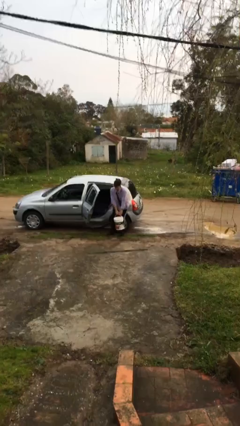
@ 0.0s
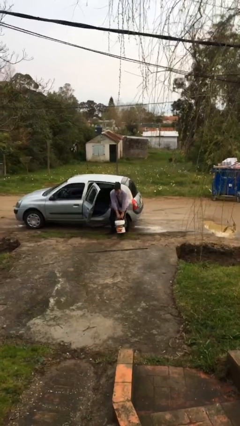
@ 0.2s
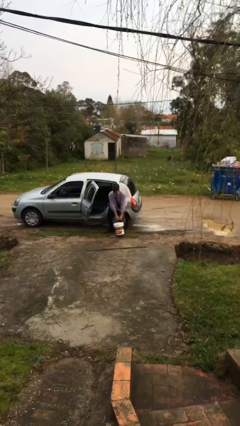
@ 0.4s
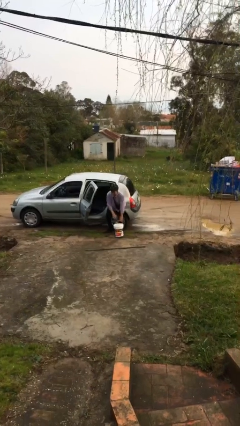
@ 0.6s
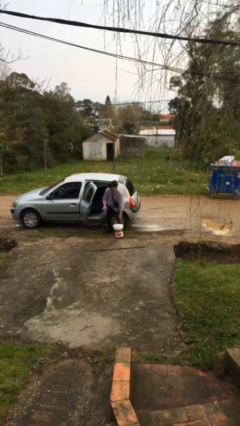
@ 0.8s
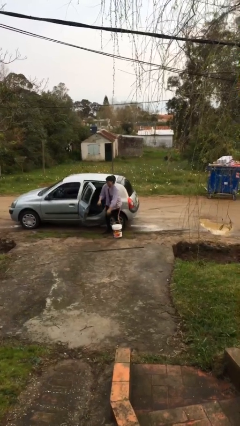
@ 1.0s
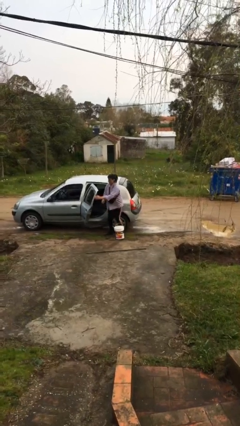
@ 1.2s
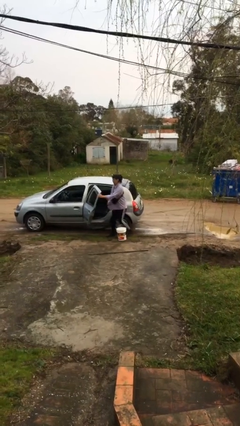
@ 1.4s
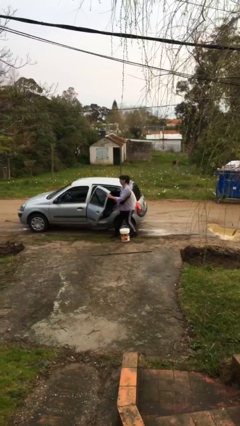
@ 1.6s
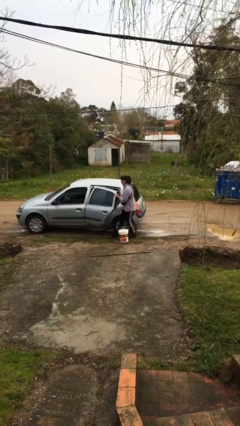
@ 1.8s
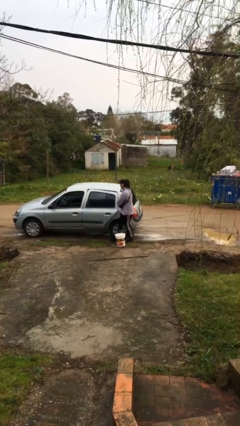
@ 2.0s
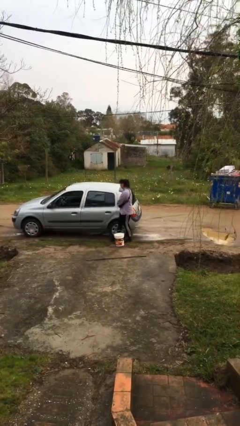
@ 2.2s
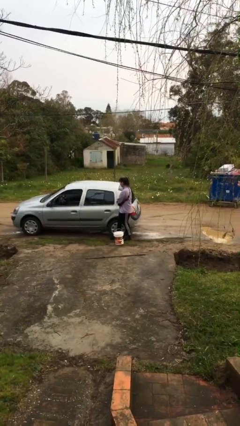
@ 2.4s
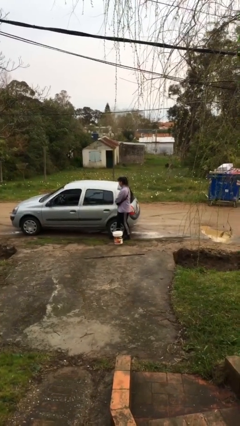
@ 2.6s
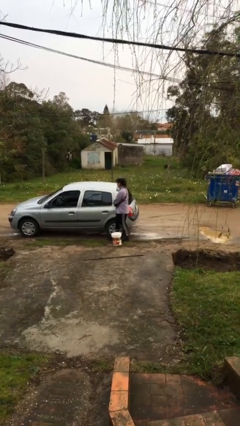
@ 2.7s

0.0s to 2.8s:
person closes car door

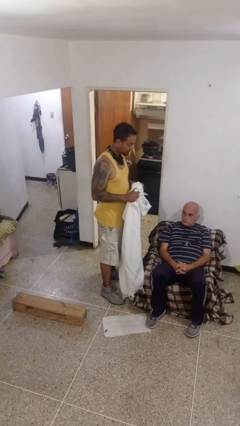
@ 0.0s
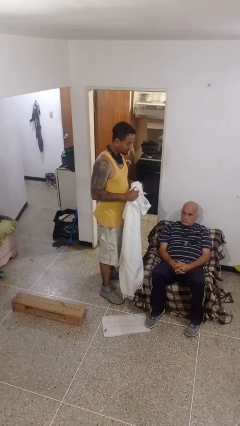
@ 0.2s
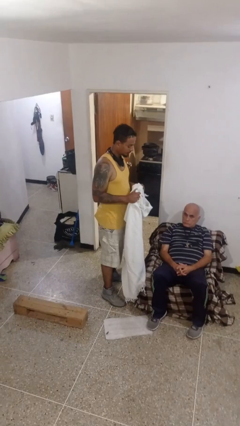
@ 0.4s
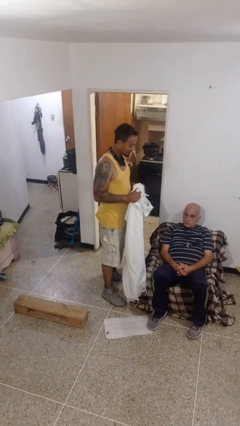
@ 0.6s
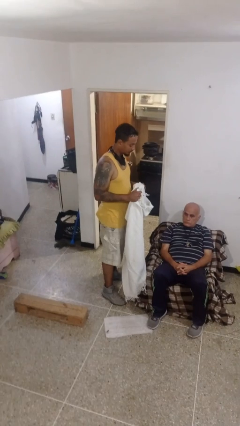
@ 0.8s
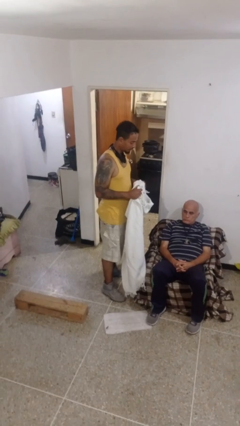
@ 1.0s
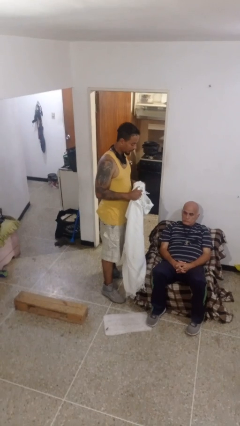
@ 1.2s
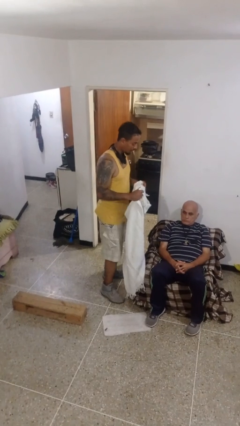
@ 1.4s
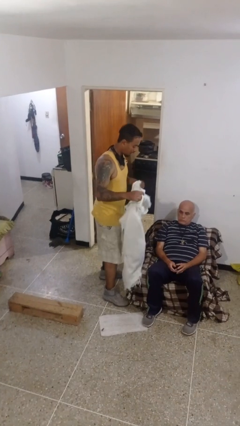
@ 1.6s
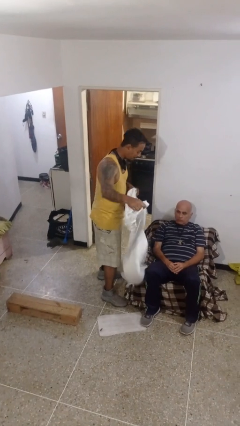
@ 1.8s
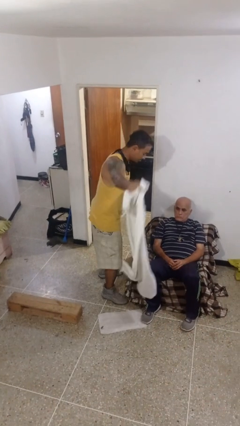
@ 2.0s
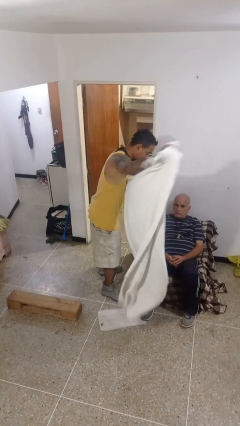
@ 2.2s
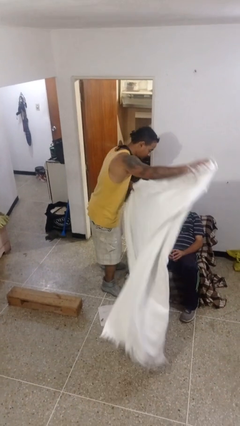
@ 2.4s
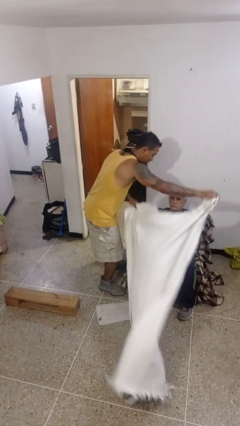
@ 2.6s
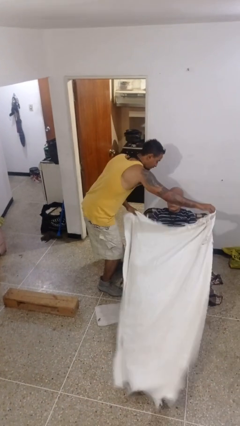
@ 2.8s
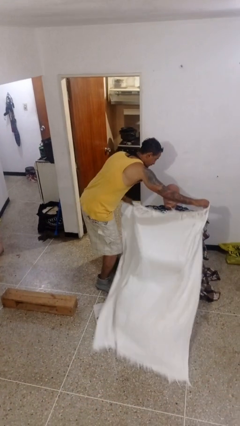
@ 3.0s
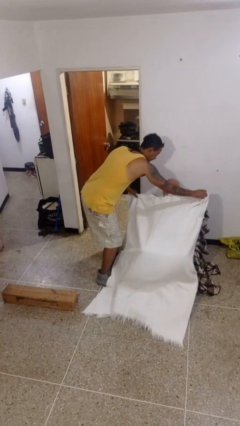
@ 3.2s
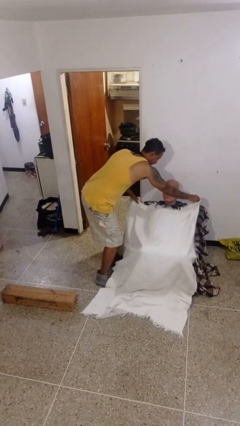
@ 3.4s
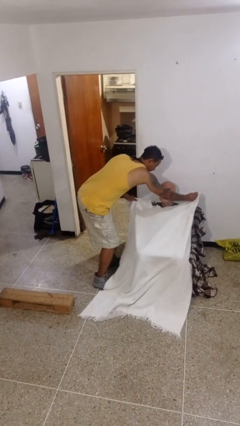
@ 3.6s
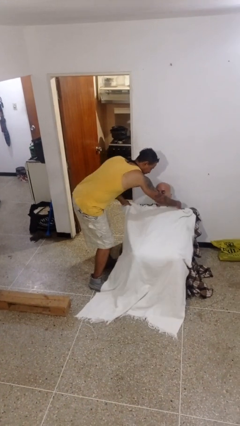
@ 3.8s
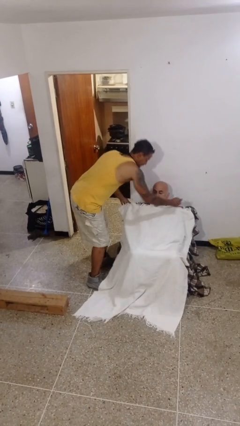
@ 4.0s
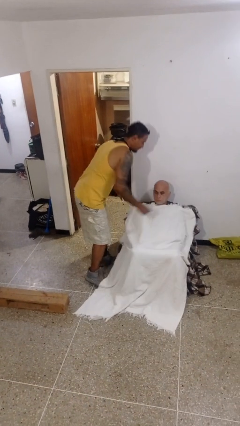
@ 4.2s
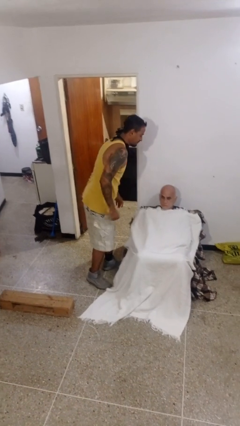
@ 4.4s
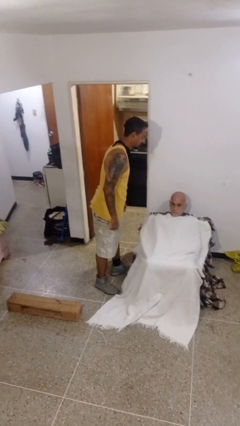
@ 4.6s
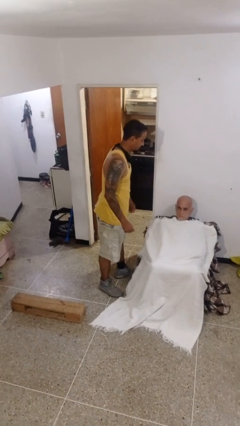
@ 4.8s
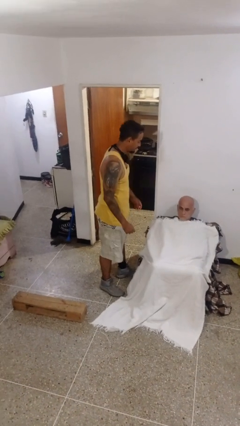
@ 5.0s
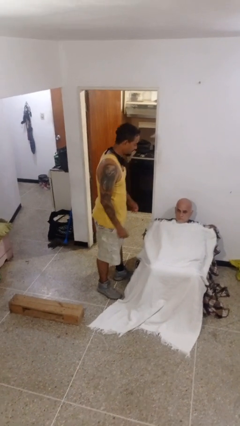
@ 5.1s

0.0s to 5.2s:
person covers friend with blanket

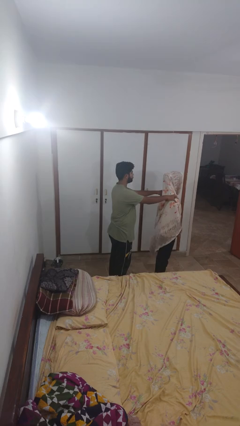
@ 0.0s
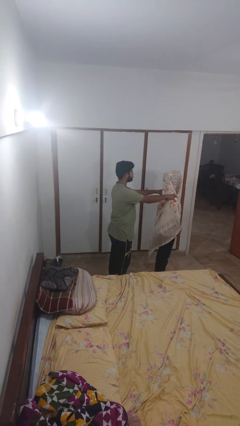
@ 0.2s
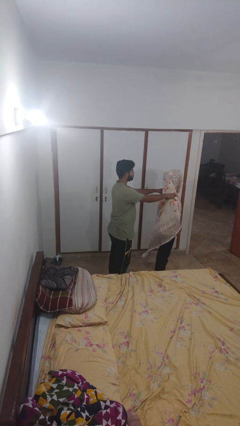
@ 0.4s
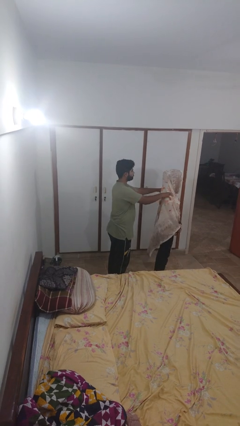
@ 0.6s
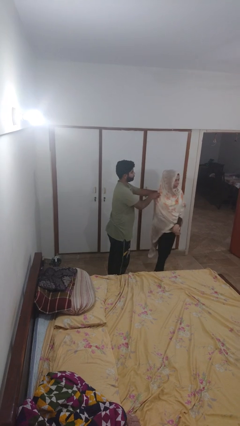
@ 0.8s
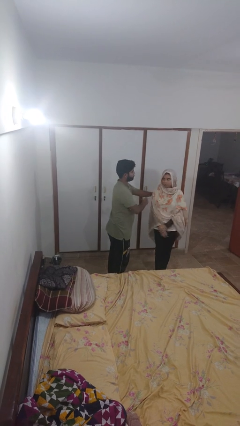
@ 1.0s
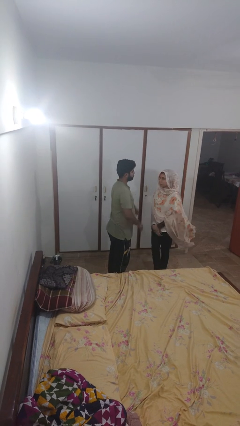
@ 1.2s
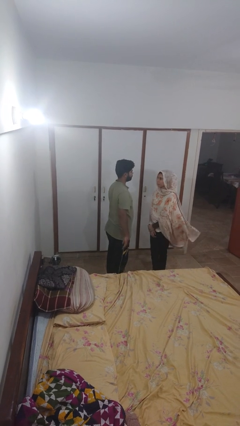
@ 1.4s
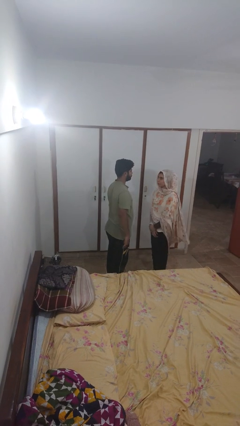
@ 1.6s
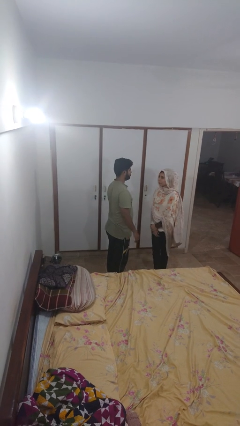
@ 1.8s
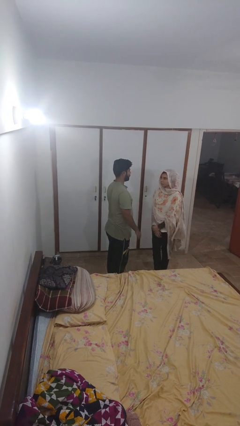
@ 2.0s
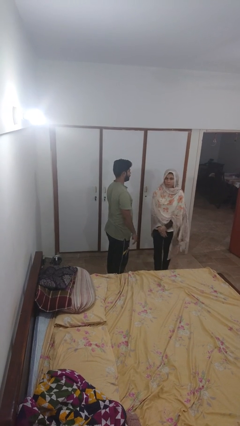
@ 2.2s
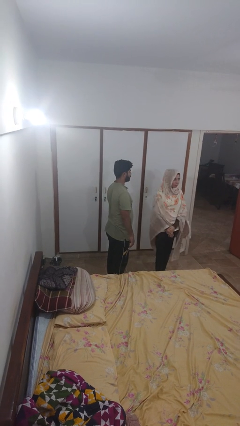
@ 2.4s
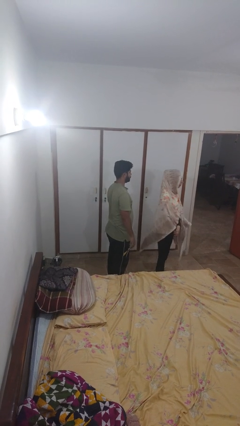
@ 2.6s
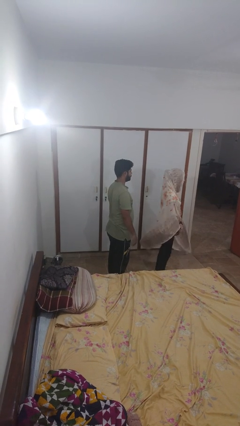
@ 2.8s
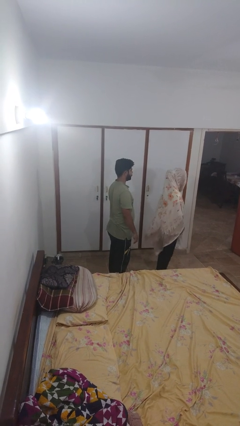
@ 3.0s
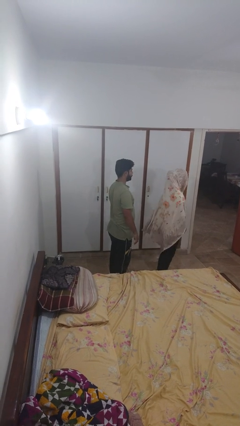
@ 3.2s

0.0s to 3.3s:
person spins person around

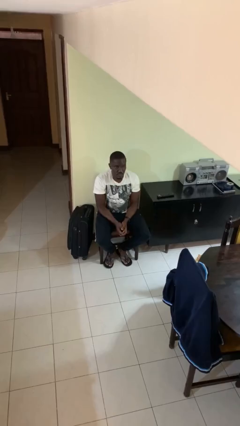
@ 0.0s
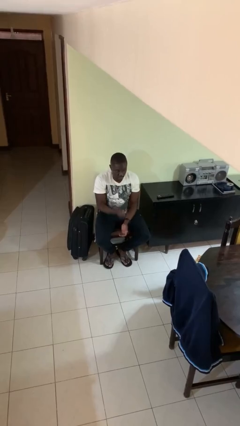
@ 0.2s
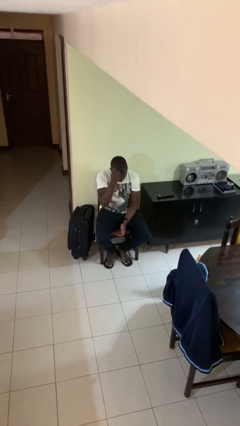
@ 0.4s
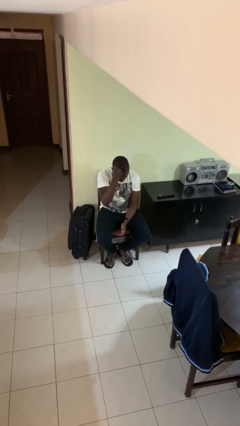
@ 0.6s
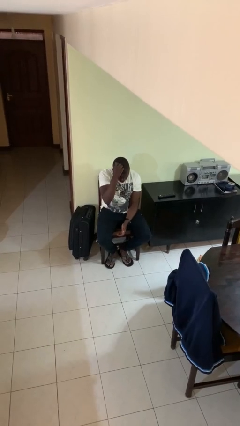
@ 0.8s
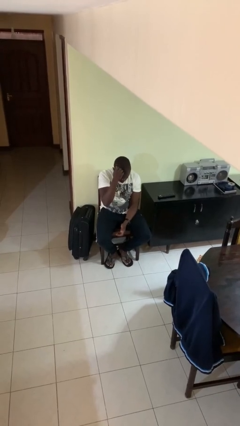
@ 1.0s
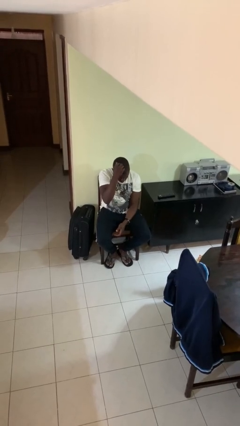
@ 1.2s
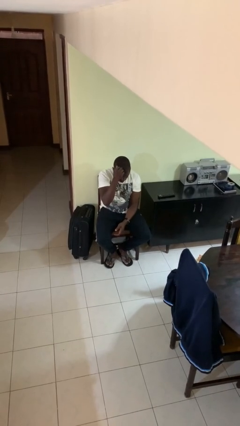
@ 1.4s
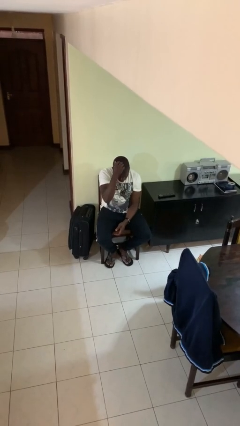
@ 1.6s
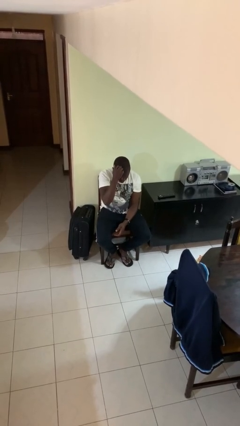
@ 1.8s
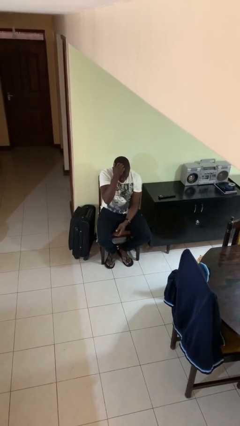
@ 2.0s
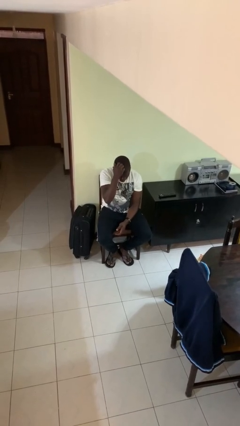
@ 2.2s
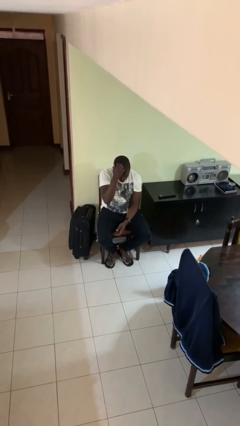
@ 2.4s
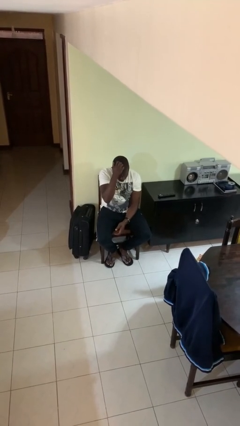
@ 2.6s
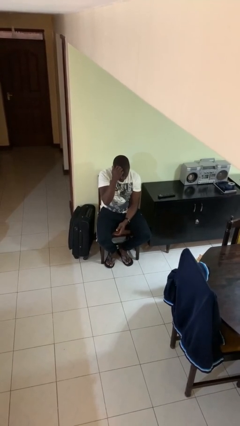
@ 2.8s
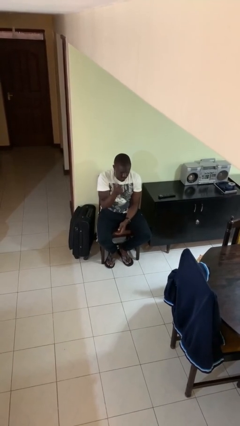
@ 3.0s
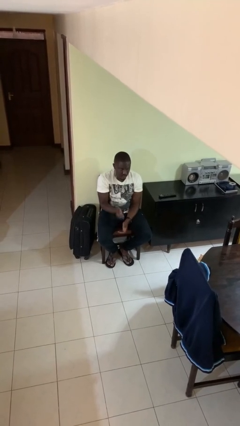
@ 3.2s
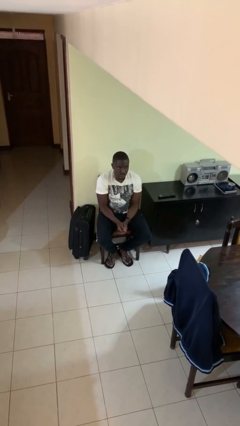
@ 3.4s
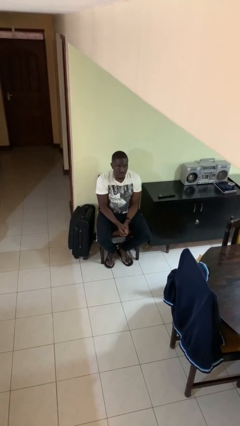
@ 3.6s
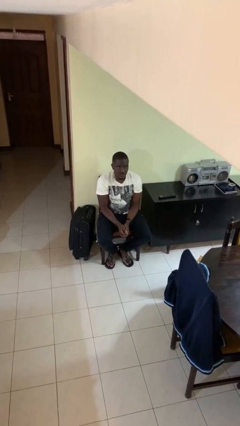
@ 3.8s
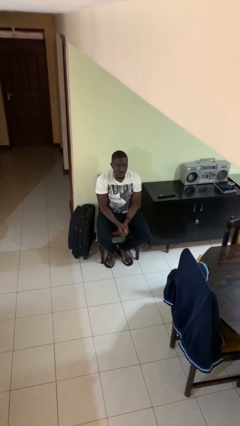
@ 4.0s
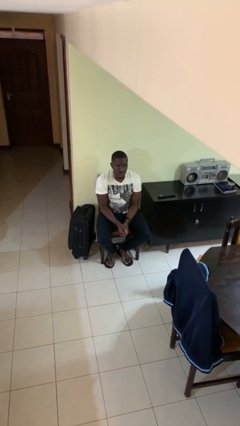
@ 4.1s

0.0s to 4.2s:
person scratches face

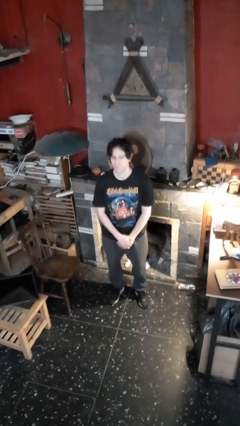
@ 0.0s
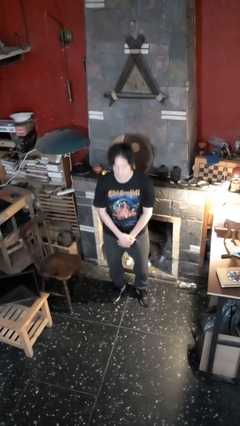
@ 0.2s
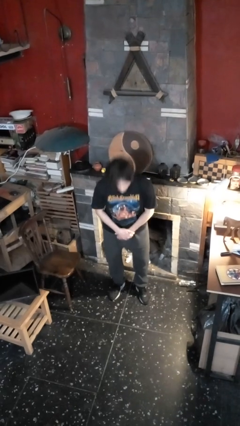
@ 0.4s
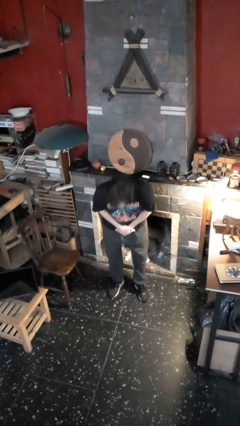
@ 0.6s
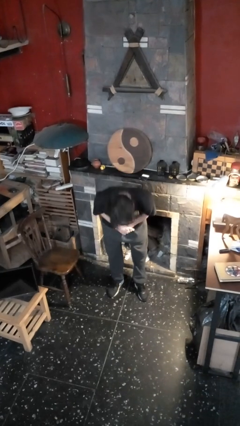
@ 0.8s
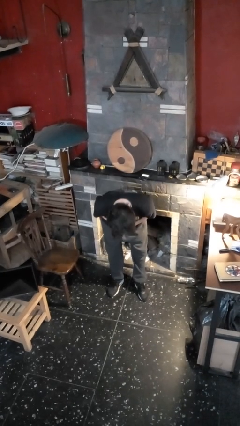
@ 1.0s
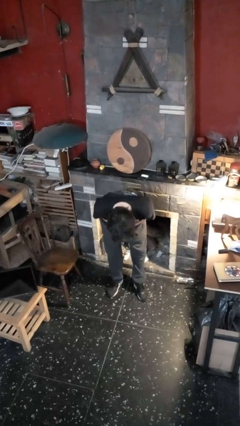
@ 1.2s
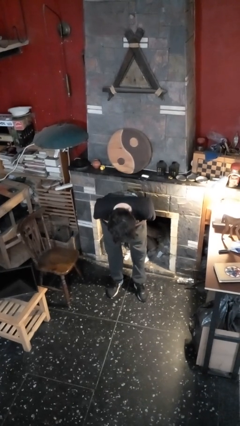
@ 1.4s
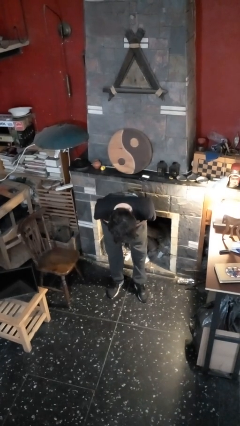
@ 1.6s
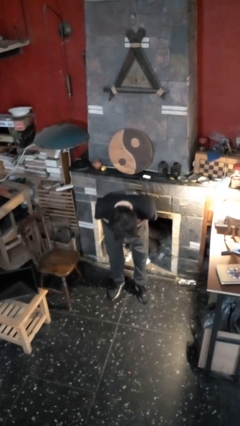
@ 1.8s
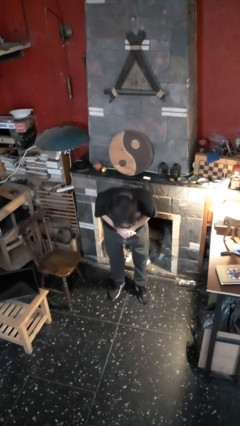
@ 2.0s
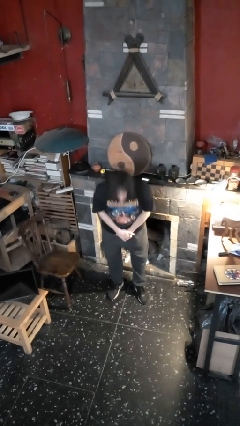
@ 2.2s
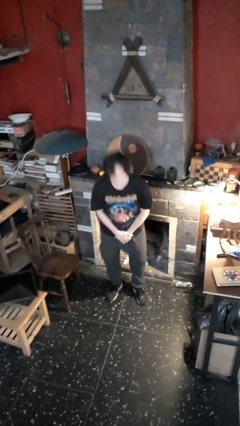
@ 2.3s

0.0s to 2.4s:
person bows
